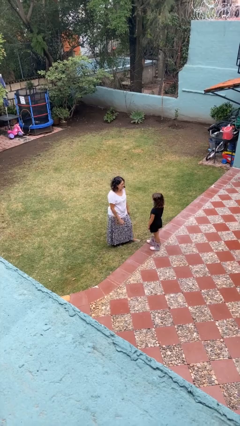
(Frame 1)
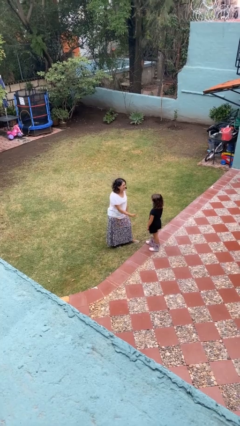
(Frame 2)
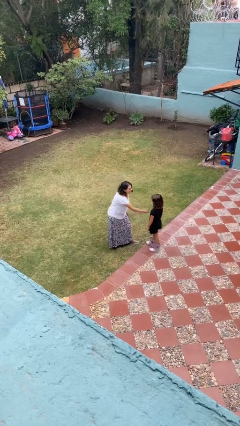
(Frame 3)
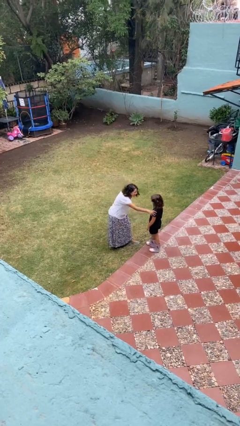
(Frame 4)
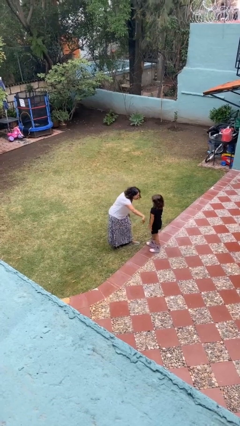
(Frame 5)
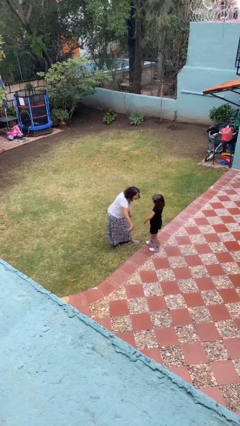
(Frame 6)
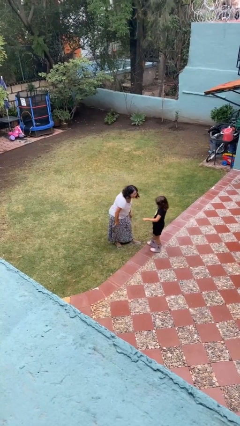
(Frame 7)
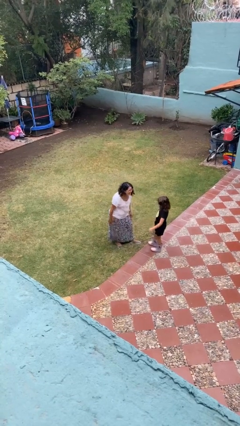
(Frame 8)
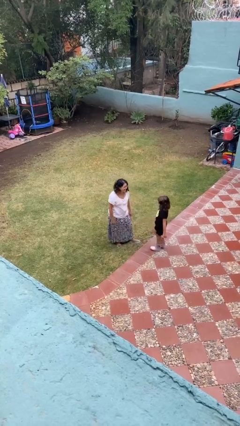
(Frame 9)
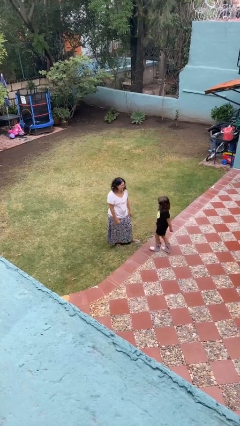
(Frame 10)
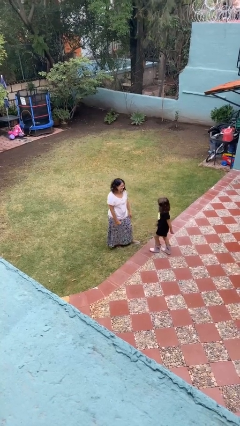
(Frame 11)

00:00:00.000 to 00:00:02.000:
person shoves person

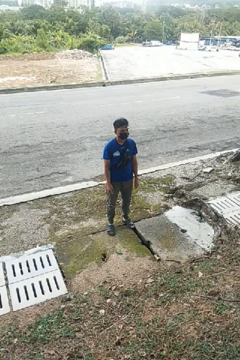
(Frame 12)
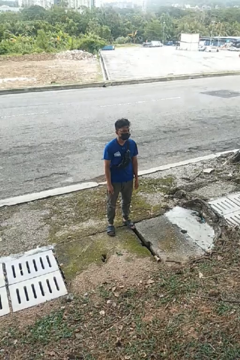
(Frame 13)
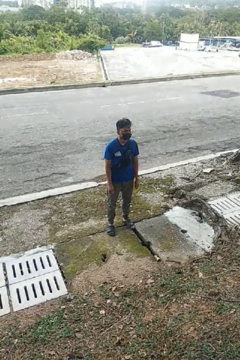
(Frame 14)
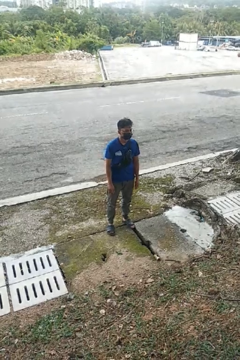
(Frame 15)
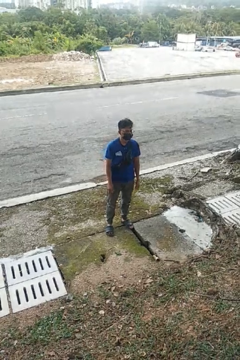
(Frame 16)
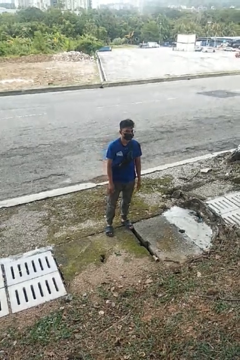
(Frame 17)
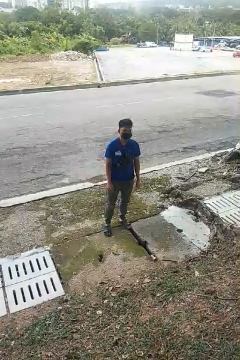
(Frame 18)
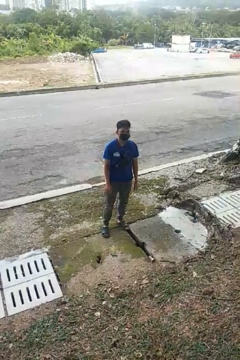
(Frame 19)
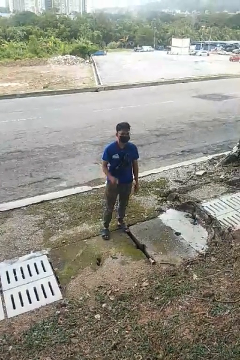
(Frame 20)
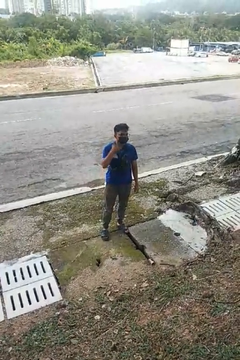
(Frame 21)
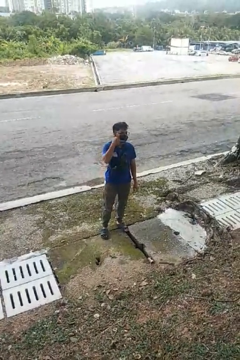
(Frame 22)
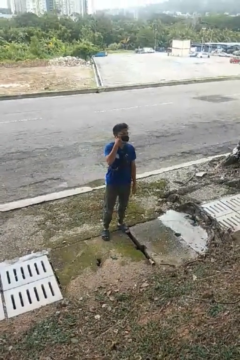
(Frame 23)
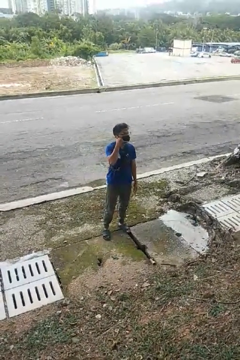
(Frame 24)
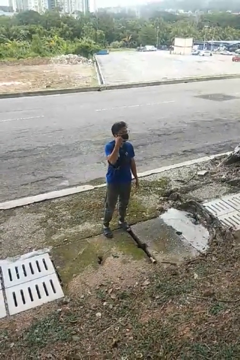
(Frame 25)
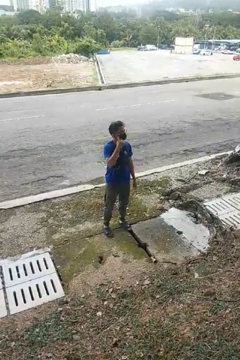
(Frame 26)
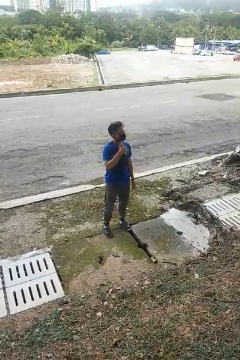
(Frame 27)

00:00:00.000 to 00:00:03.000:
person gestures call me

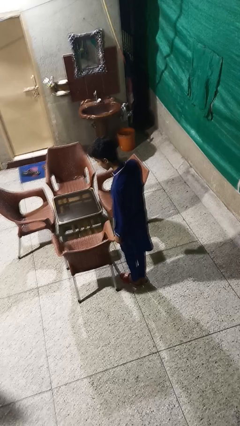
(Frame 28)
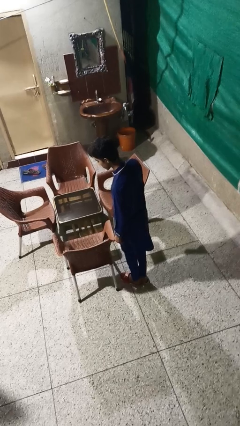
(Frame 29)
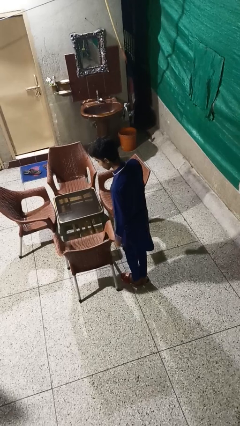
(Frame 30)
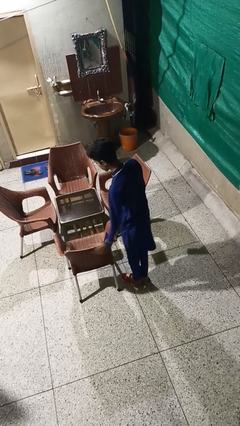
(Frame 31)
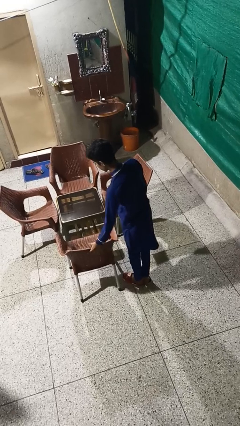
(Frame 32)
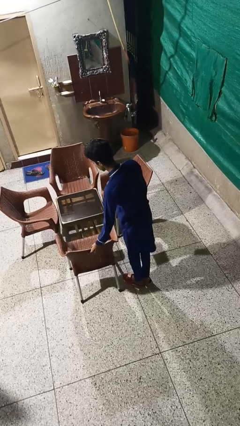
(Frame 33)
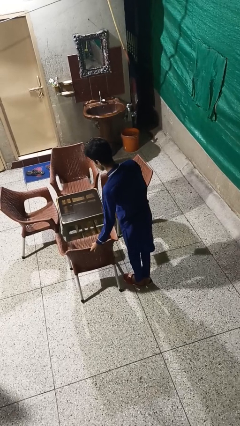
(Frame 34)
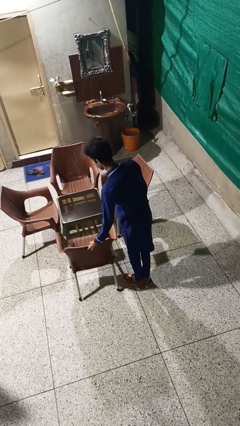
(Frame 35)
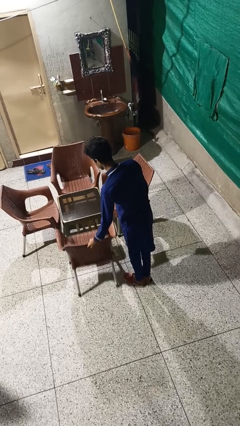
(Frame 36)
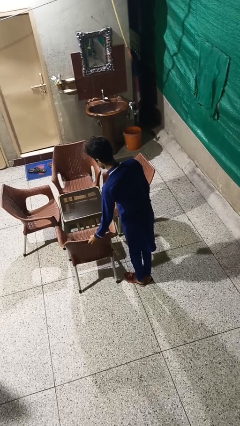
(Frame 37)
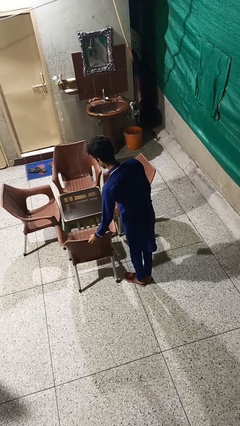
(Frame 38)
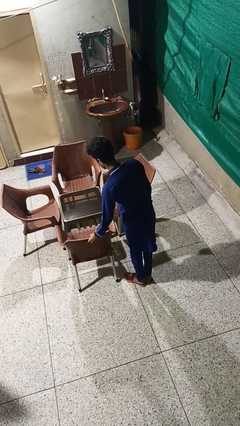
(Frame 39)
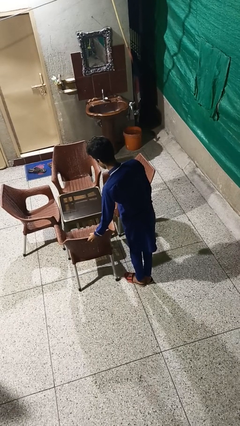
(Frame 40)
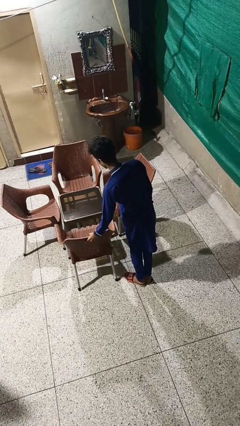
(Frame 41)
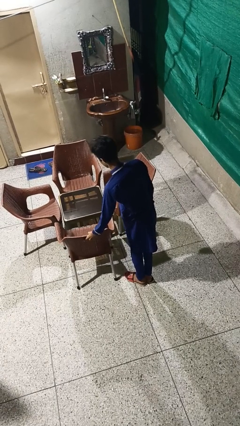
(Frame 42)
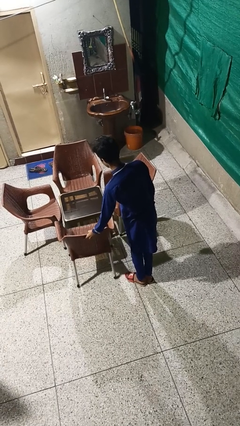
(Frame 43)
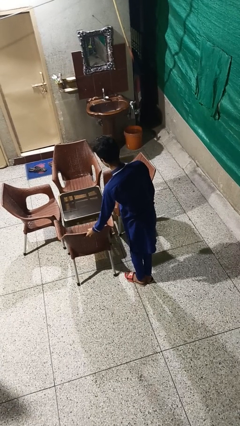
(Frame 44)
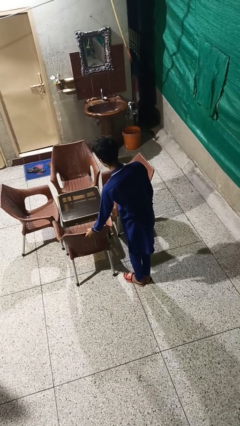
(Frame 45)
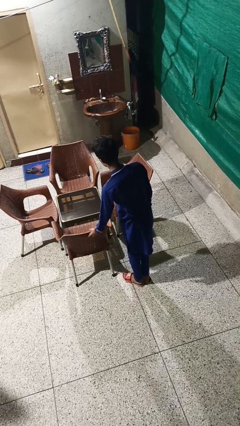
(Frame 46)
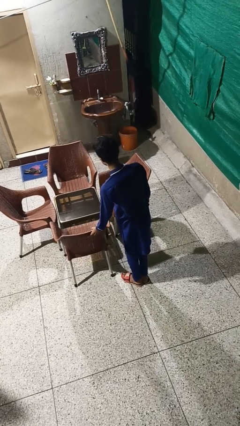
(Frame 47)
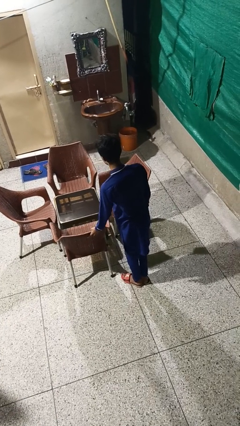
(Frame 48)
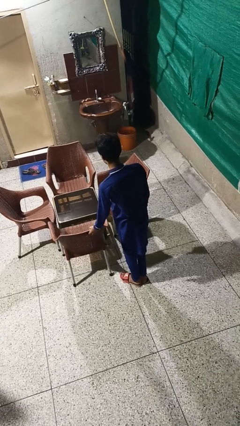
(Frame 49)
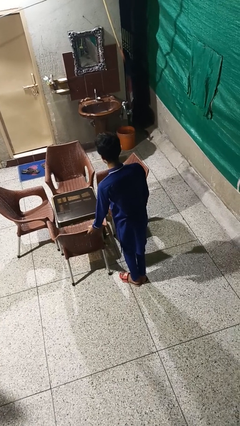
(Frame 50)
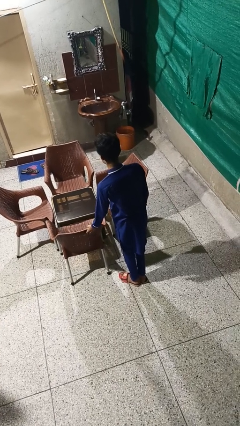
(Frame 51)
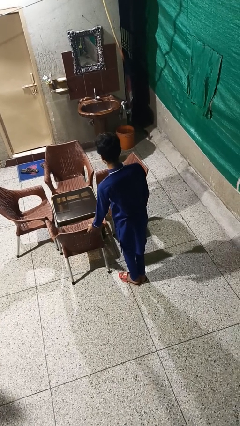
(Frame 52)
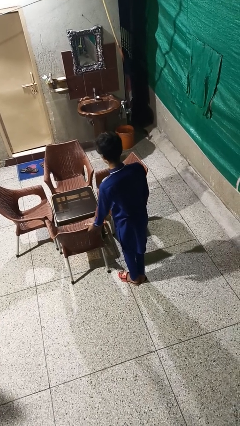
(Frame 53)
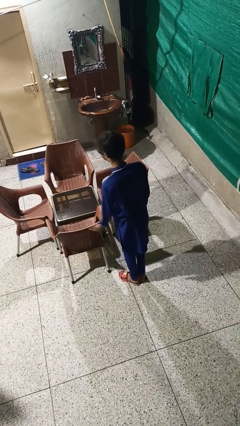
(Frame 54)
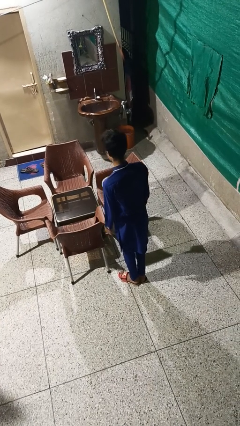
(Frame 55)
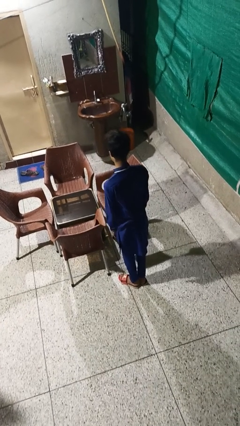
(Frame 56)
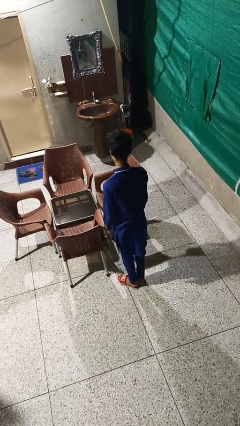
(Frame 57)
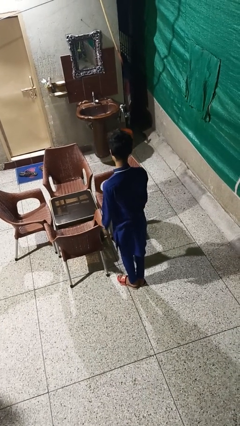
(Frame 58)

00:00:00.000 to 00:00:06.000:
person pushes in chair

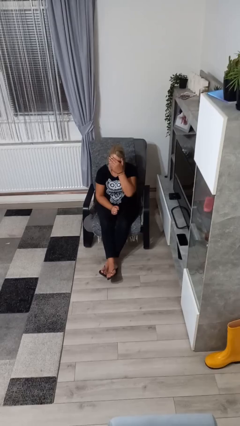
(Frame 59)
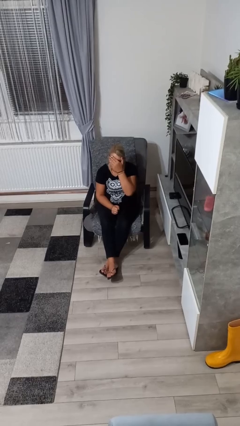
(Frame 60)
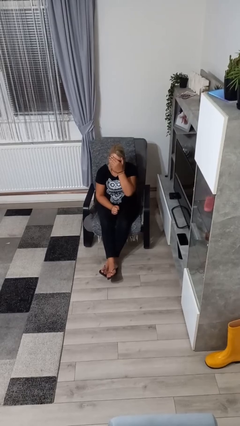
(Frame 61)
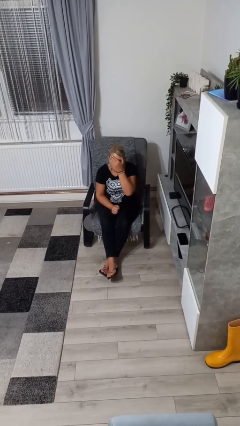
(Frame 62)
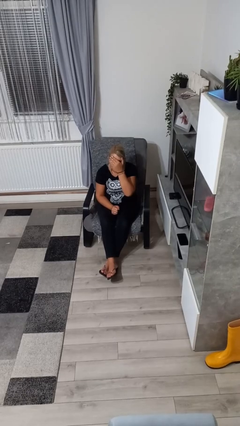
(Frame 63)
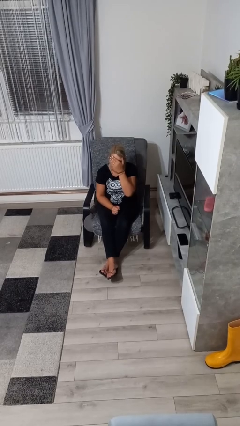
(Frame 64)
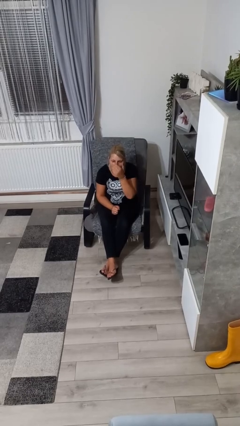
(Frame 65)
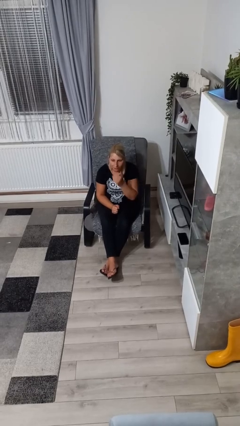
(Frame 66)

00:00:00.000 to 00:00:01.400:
person covers face with hands

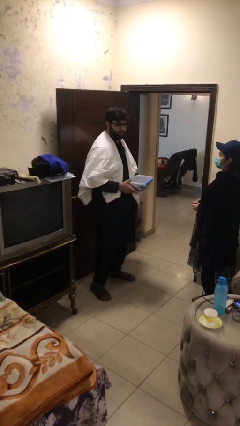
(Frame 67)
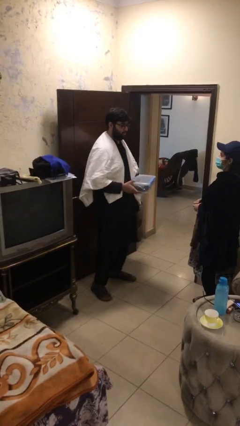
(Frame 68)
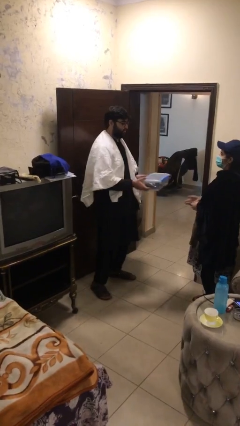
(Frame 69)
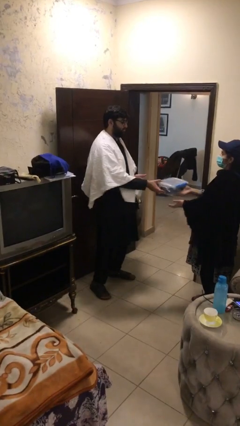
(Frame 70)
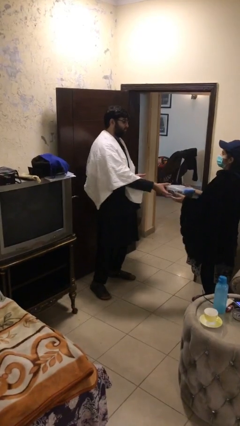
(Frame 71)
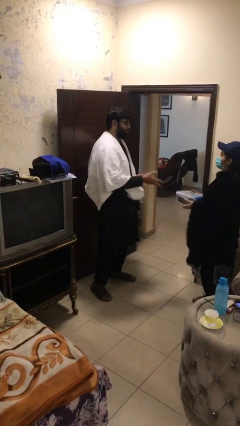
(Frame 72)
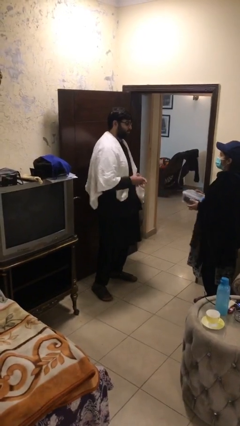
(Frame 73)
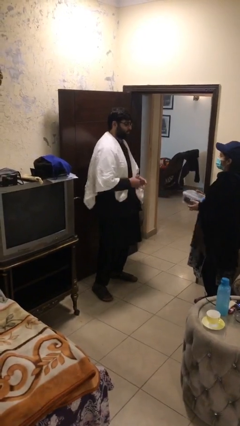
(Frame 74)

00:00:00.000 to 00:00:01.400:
person transfers object to person

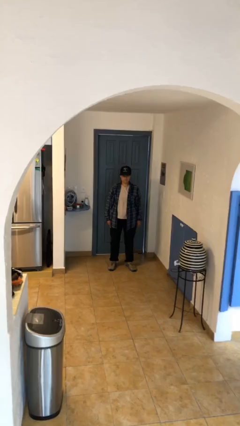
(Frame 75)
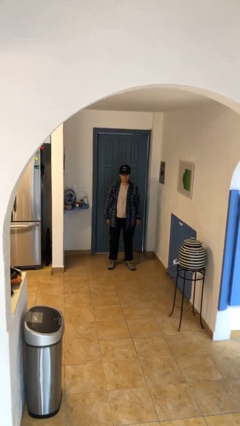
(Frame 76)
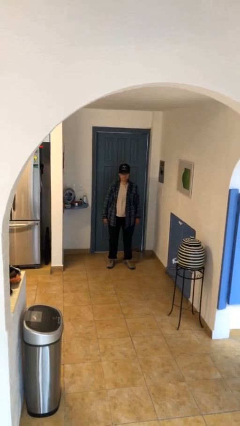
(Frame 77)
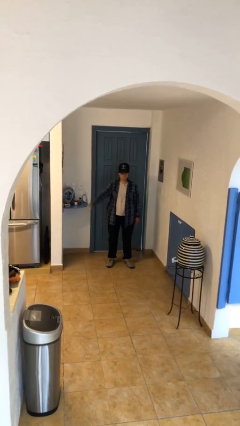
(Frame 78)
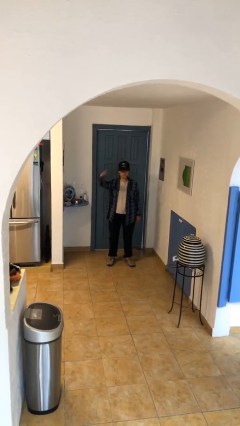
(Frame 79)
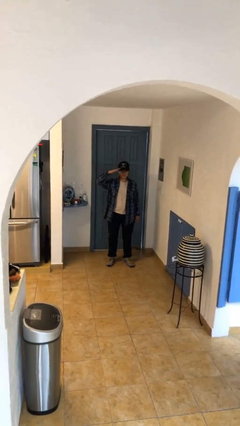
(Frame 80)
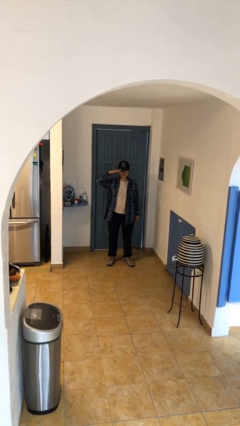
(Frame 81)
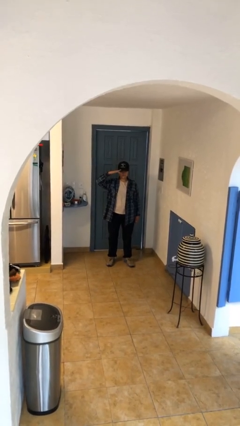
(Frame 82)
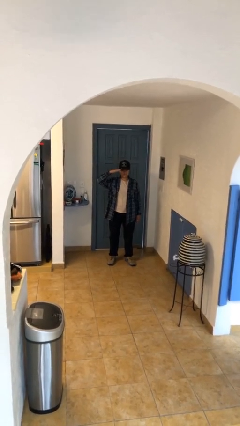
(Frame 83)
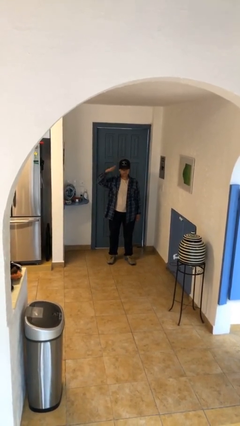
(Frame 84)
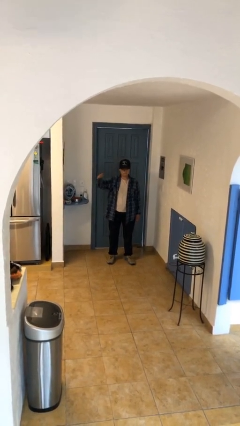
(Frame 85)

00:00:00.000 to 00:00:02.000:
person salutes

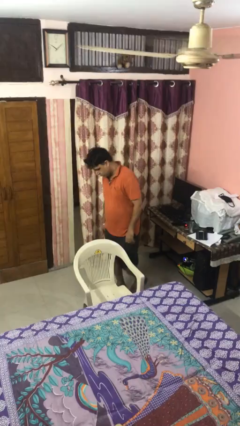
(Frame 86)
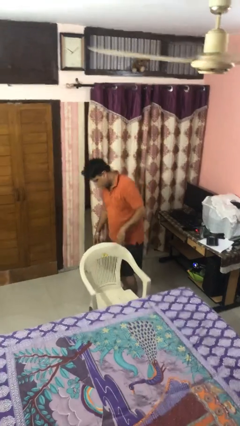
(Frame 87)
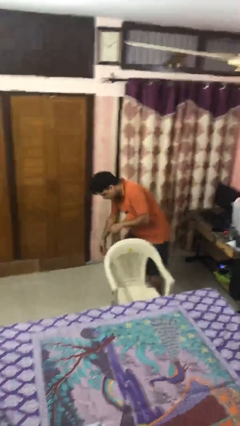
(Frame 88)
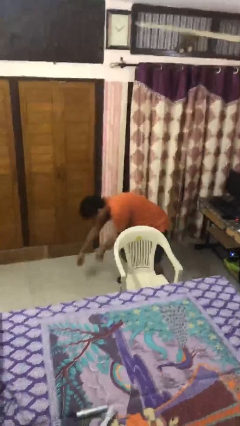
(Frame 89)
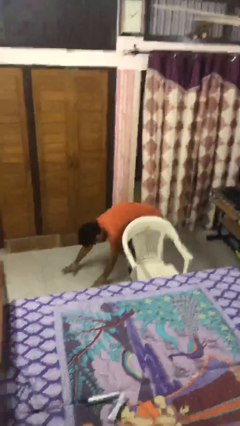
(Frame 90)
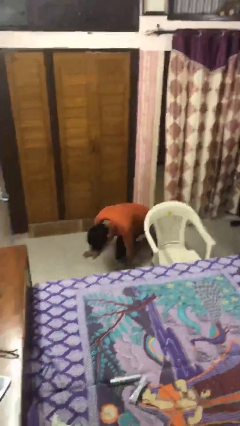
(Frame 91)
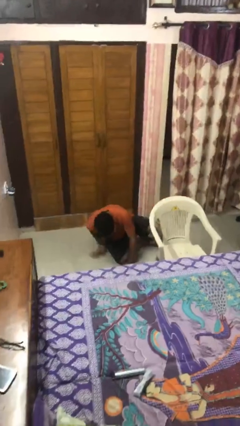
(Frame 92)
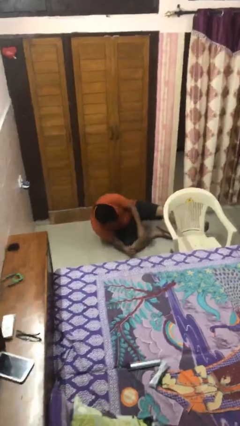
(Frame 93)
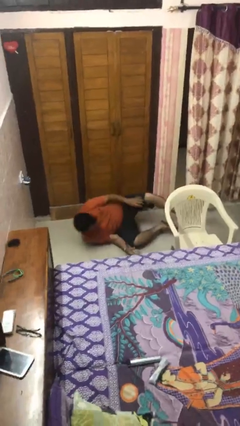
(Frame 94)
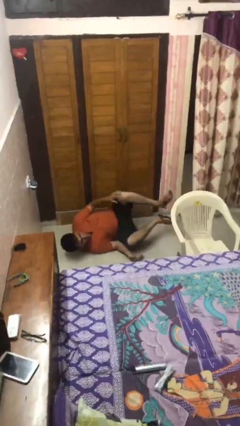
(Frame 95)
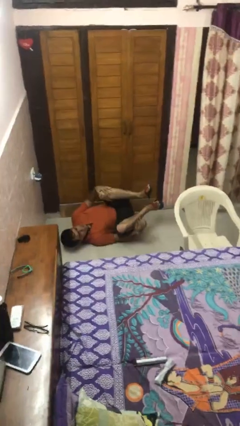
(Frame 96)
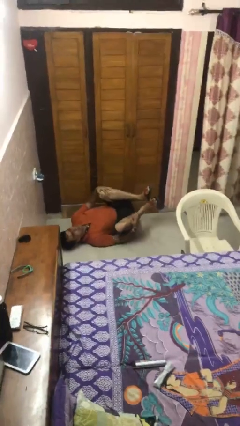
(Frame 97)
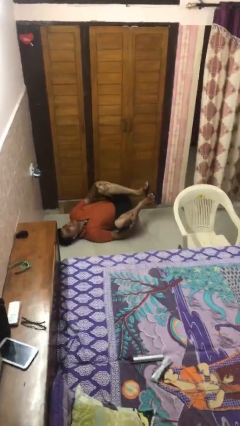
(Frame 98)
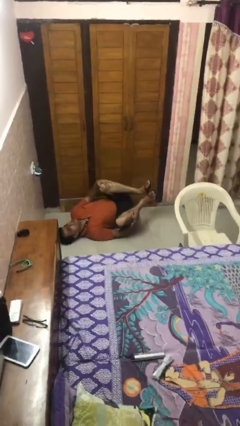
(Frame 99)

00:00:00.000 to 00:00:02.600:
person trips on object on floor
